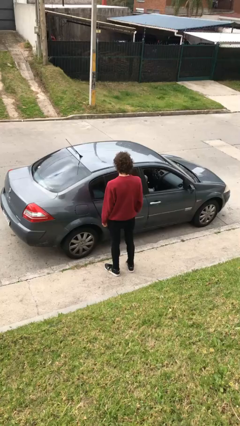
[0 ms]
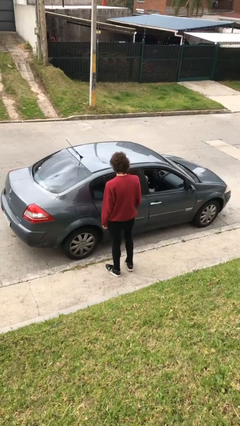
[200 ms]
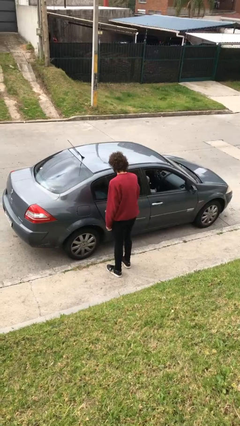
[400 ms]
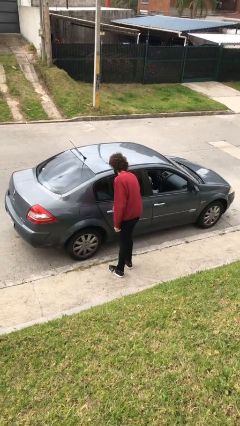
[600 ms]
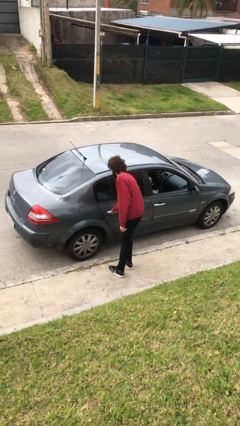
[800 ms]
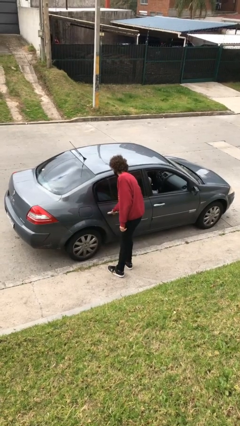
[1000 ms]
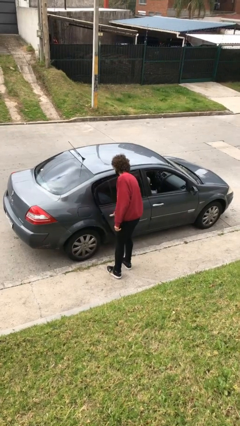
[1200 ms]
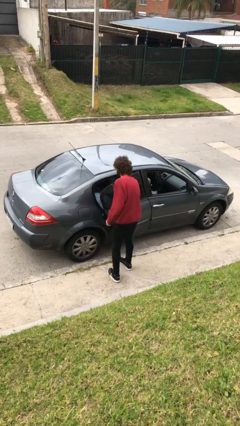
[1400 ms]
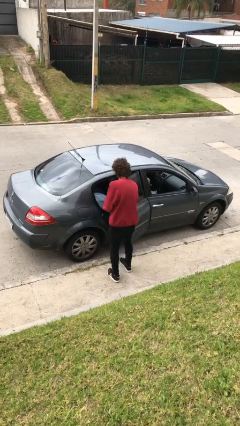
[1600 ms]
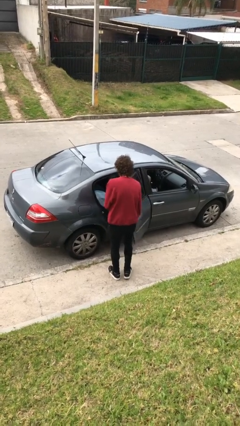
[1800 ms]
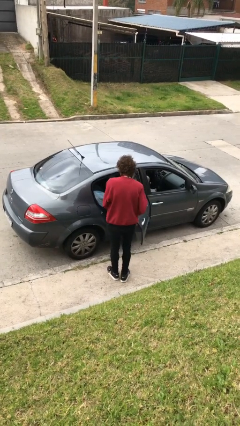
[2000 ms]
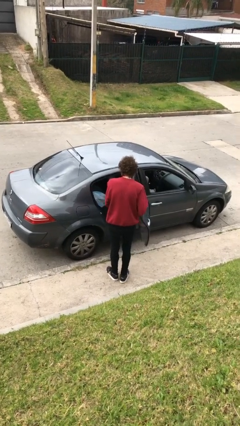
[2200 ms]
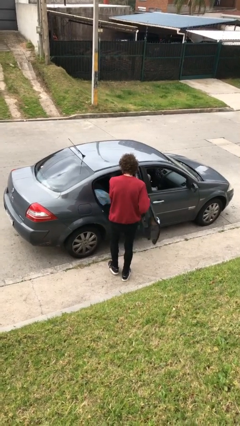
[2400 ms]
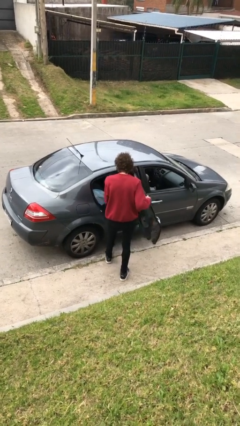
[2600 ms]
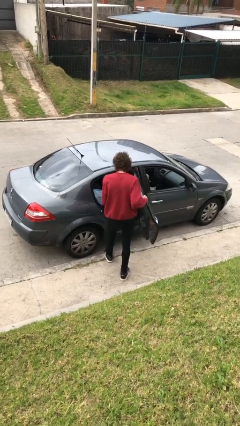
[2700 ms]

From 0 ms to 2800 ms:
person opens car door

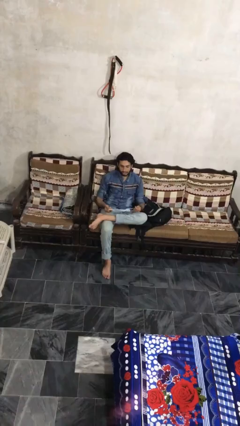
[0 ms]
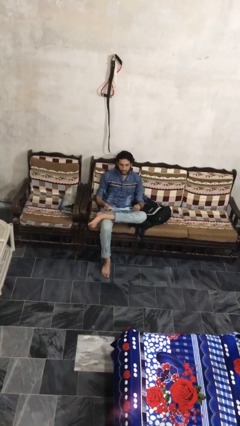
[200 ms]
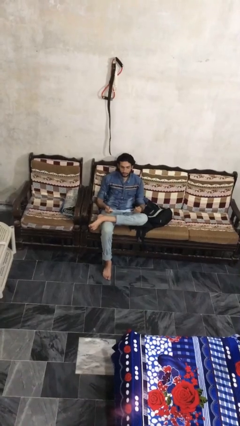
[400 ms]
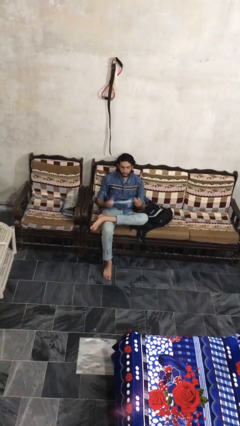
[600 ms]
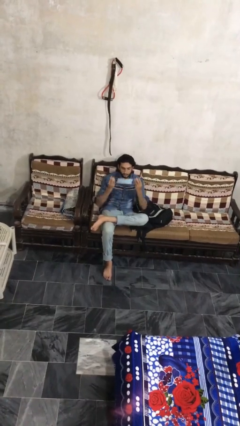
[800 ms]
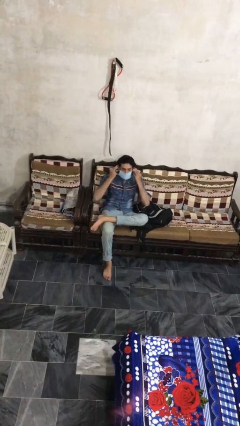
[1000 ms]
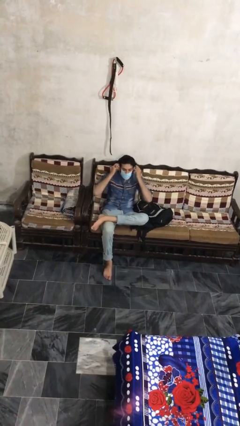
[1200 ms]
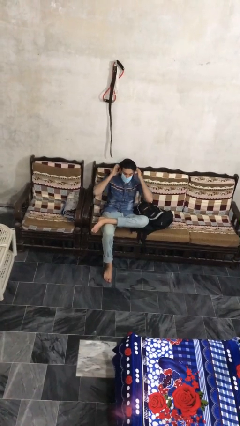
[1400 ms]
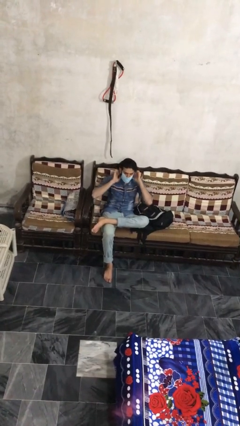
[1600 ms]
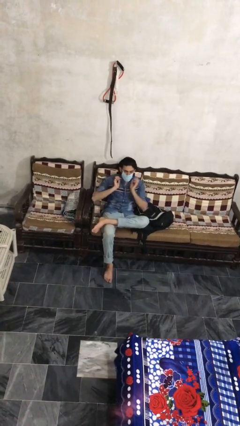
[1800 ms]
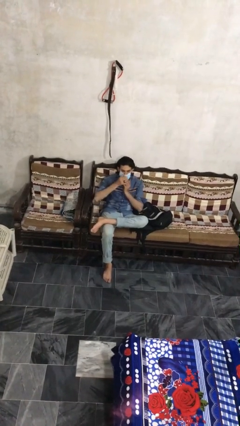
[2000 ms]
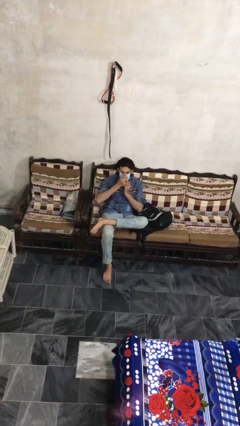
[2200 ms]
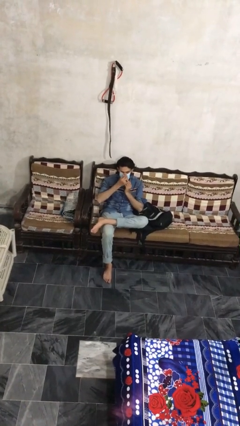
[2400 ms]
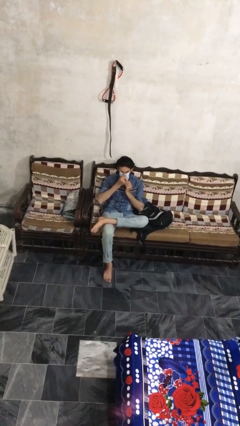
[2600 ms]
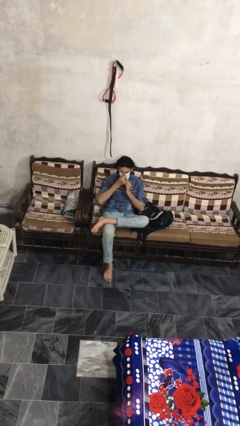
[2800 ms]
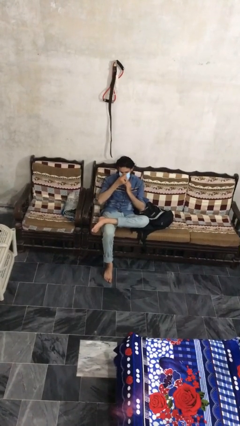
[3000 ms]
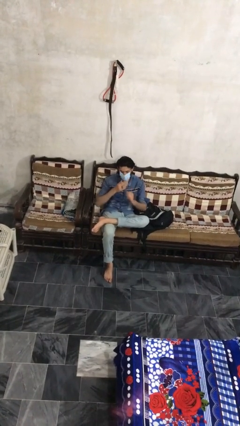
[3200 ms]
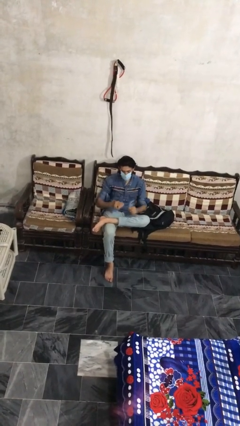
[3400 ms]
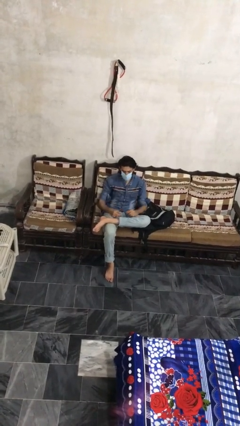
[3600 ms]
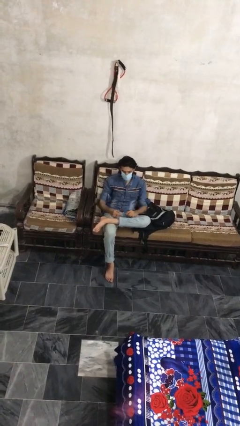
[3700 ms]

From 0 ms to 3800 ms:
person puts on facemask

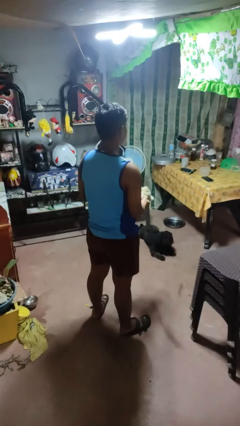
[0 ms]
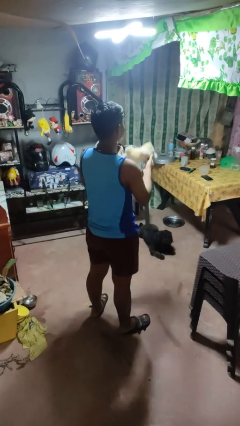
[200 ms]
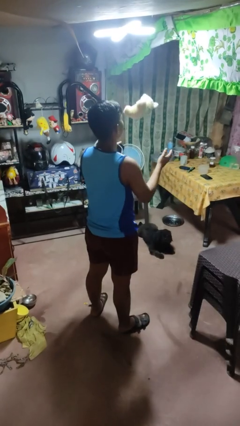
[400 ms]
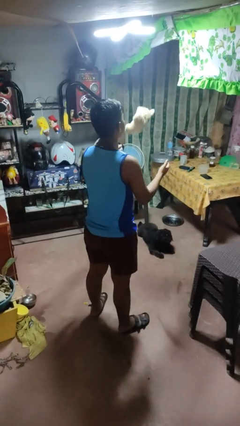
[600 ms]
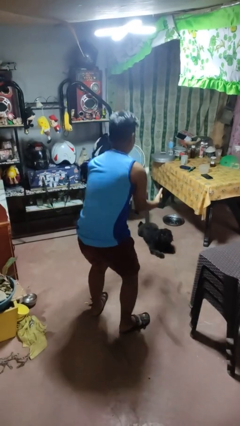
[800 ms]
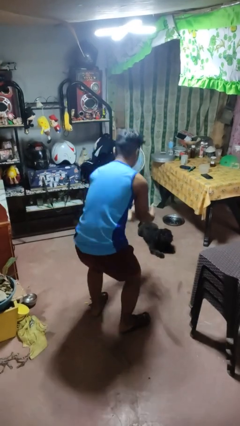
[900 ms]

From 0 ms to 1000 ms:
person drops object

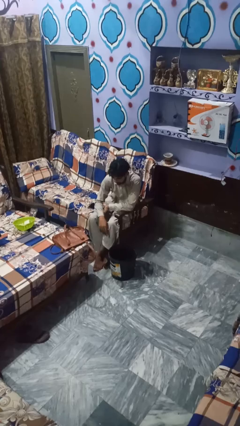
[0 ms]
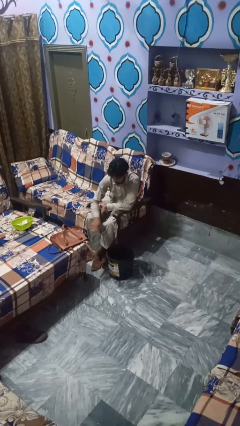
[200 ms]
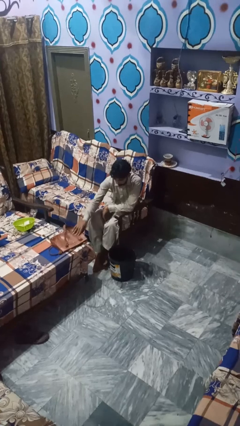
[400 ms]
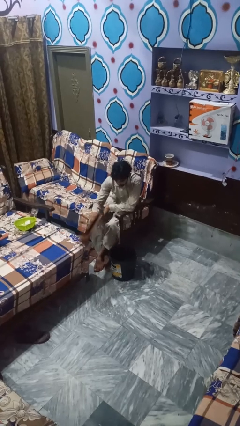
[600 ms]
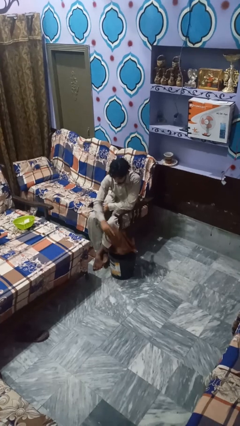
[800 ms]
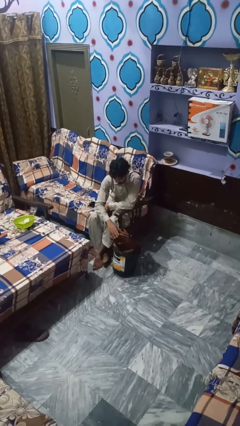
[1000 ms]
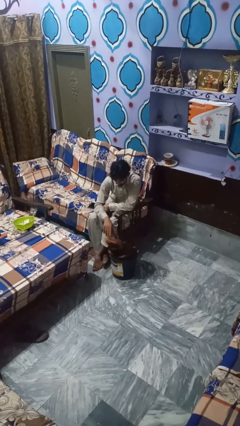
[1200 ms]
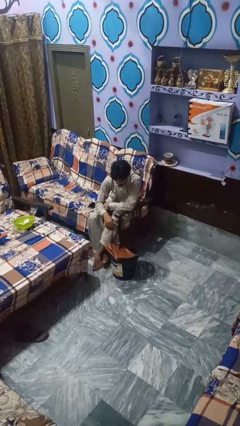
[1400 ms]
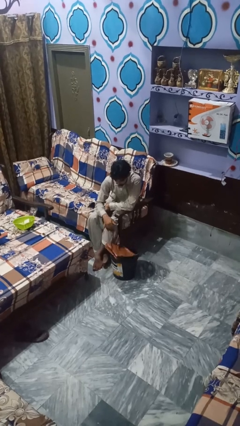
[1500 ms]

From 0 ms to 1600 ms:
person puts object into basket

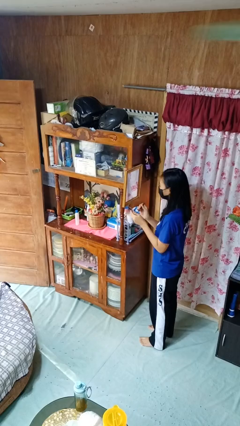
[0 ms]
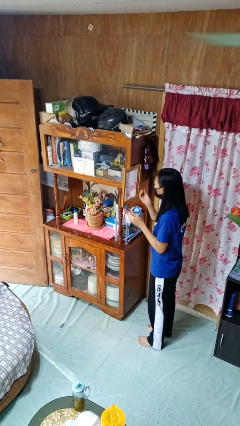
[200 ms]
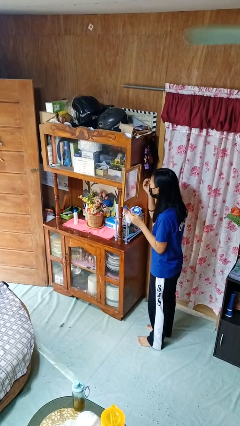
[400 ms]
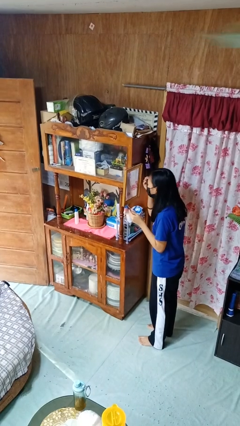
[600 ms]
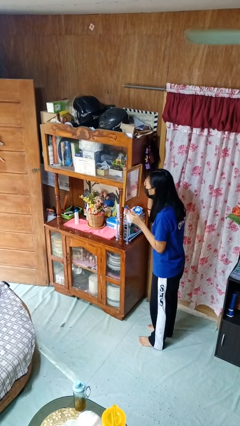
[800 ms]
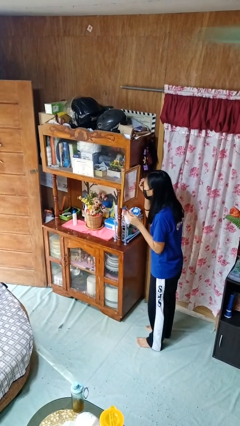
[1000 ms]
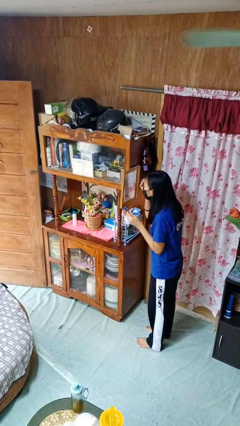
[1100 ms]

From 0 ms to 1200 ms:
person applies eye makeup

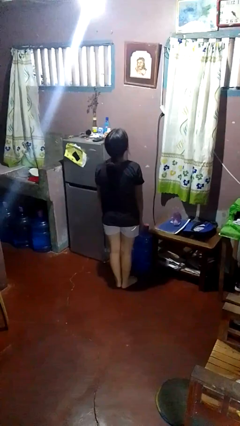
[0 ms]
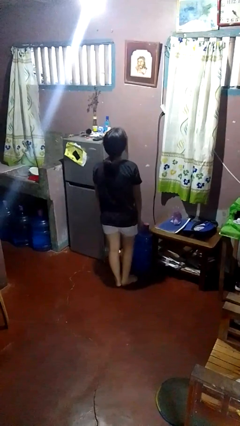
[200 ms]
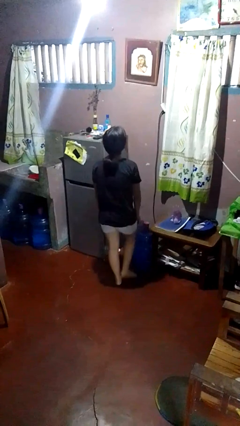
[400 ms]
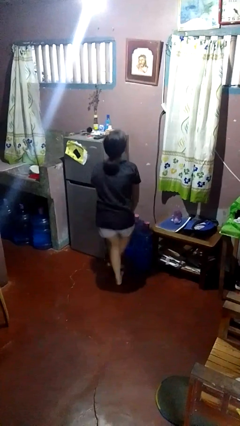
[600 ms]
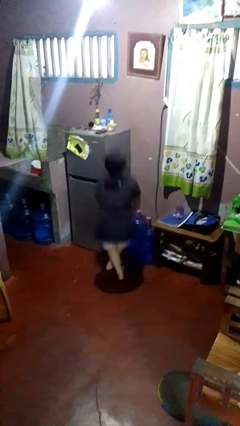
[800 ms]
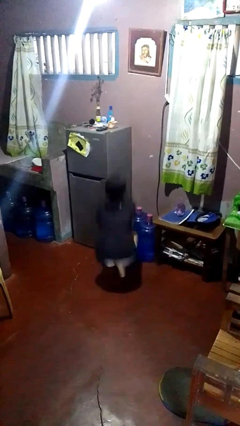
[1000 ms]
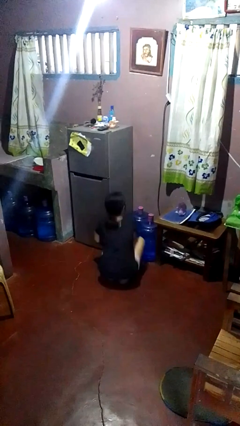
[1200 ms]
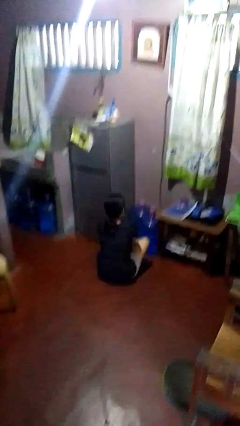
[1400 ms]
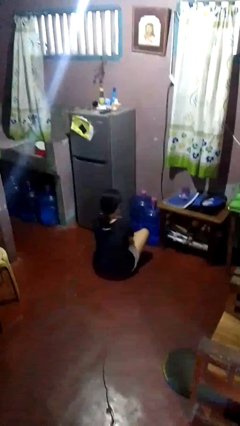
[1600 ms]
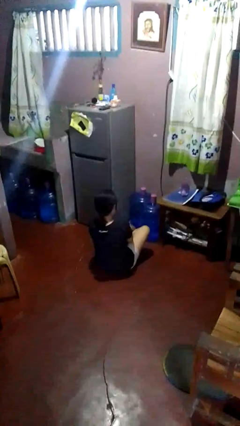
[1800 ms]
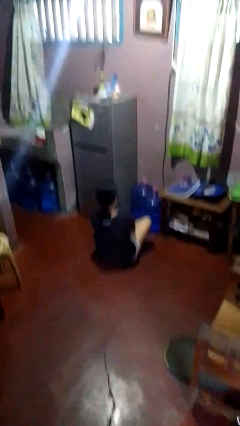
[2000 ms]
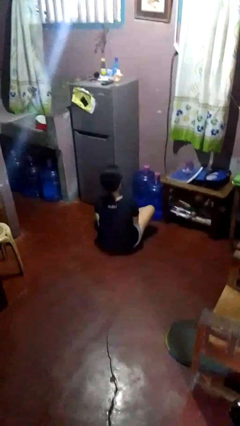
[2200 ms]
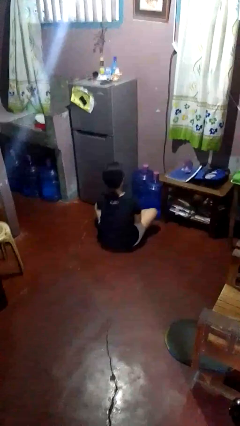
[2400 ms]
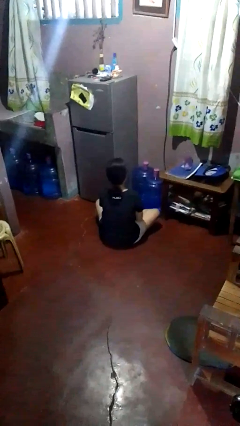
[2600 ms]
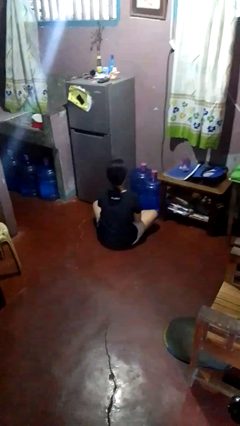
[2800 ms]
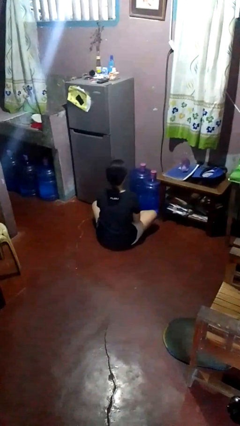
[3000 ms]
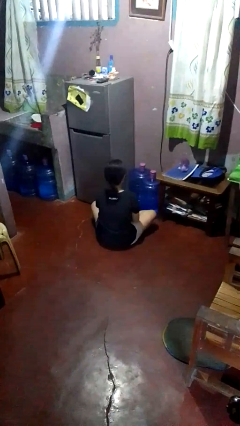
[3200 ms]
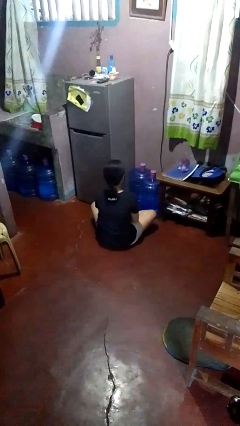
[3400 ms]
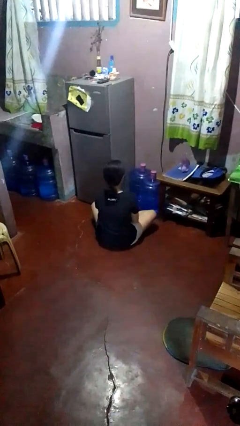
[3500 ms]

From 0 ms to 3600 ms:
person sits crisscross

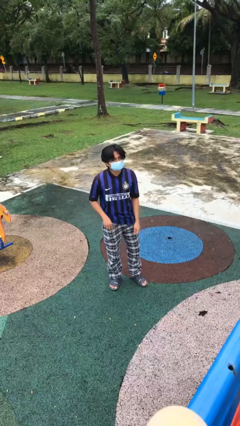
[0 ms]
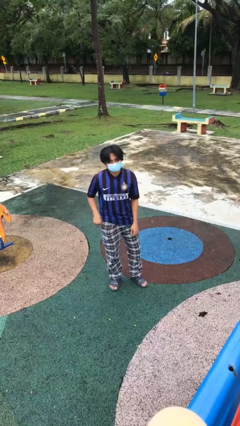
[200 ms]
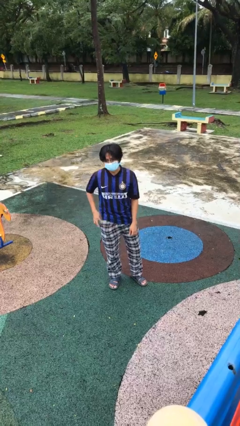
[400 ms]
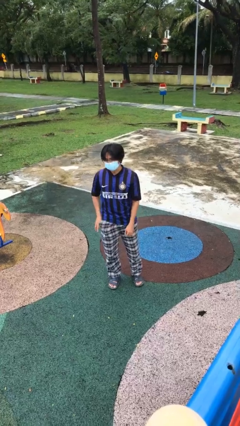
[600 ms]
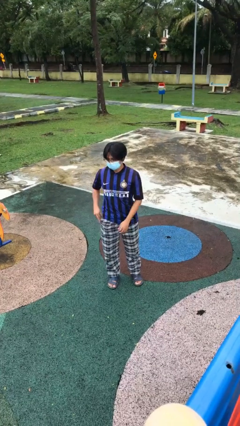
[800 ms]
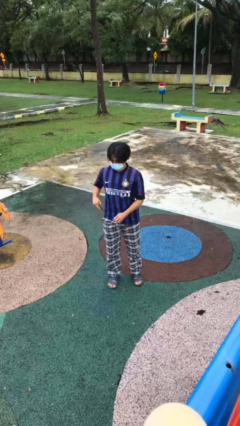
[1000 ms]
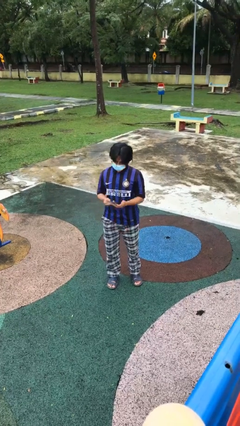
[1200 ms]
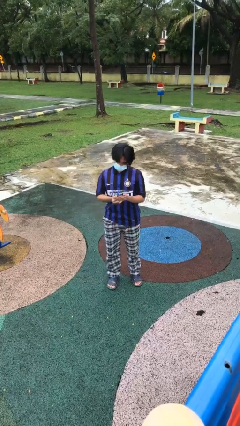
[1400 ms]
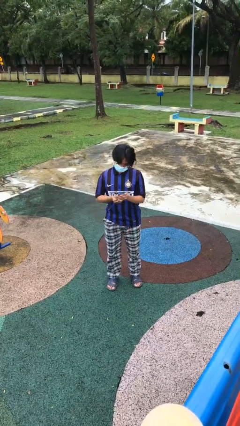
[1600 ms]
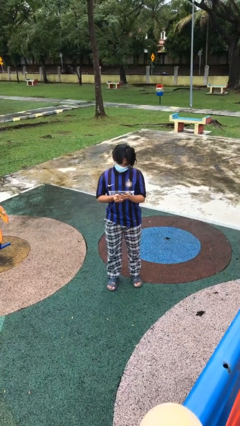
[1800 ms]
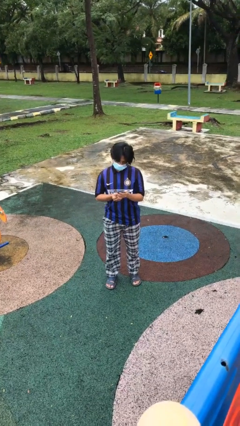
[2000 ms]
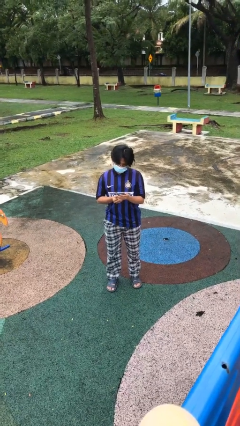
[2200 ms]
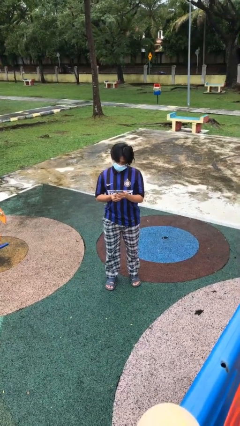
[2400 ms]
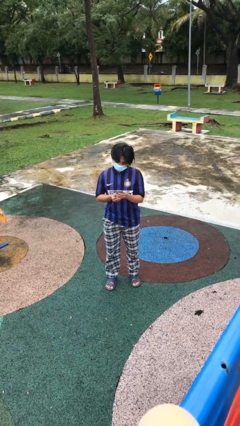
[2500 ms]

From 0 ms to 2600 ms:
person takes phone from pocket

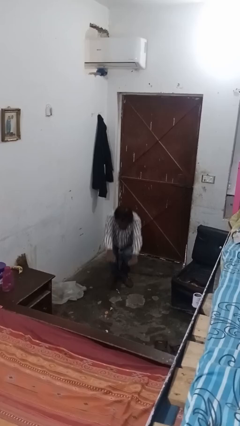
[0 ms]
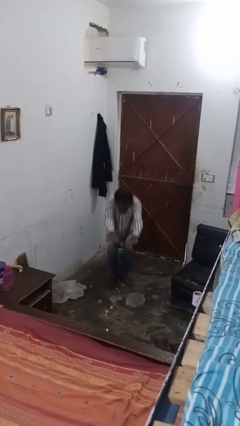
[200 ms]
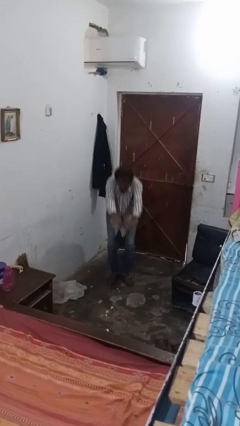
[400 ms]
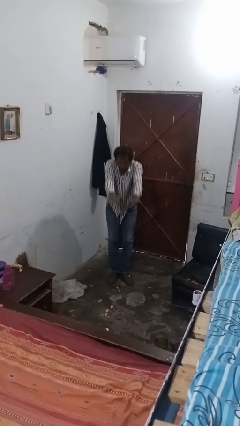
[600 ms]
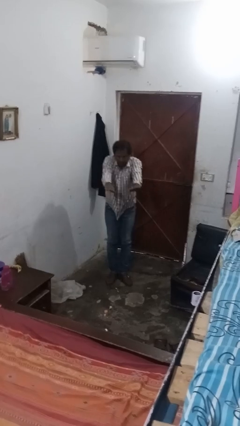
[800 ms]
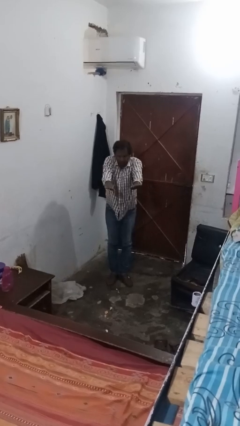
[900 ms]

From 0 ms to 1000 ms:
person stands up
